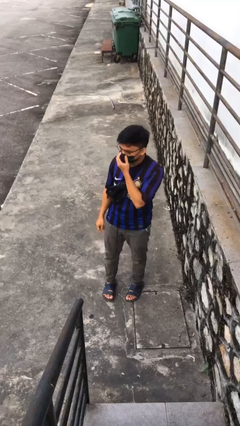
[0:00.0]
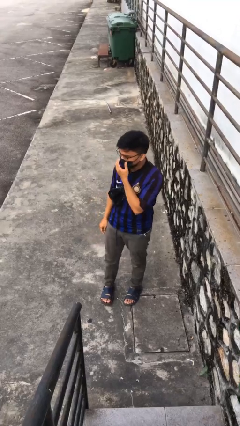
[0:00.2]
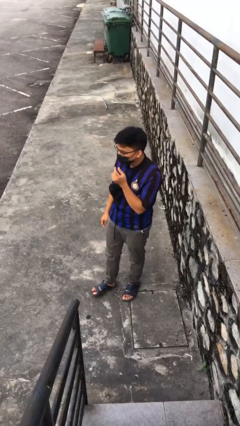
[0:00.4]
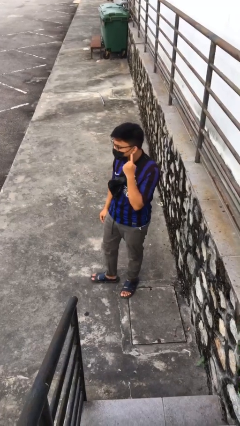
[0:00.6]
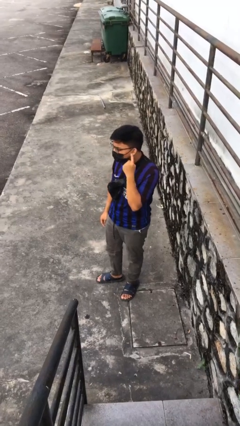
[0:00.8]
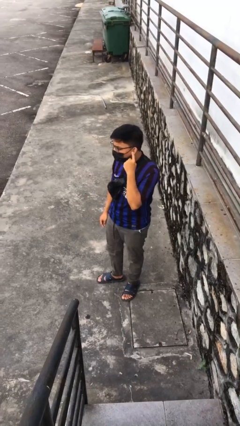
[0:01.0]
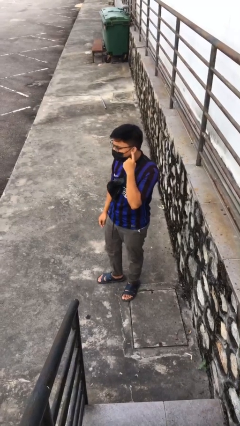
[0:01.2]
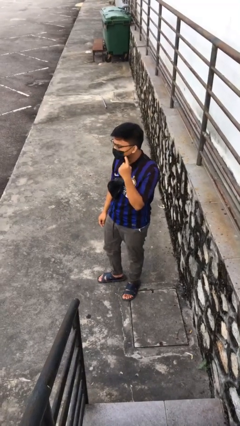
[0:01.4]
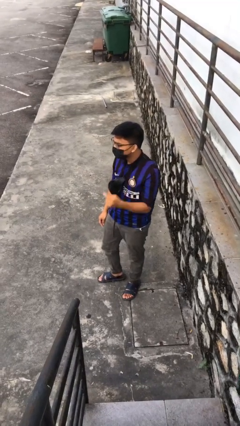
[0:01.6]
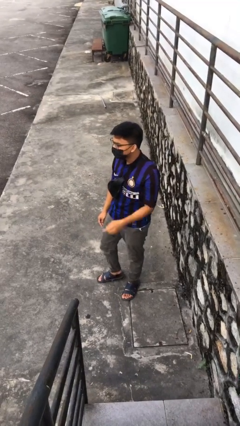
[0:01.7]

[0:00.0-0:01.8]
person gestures listen closely

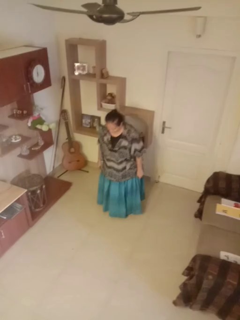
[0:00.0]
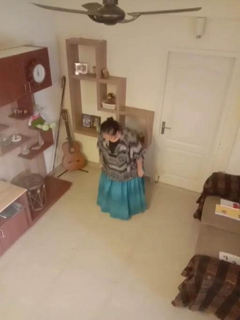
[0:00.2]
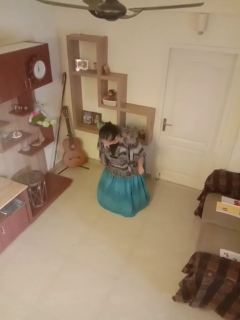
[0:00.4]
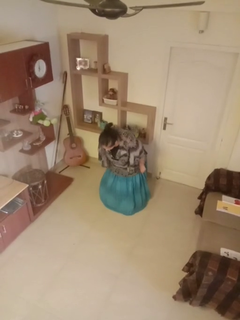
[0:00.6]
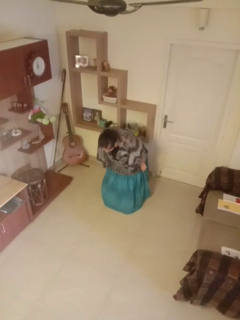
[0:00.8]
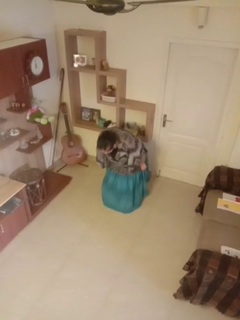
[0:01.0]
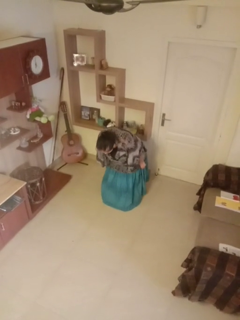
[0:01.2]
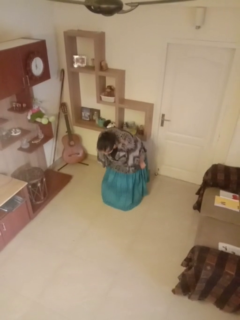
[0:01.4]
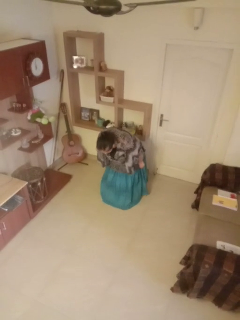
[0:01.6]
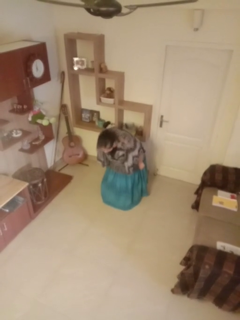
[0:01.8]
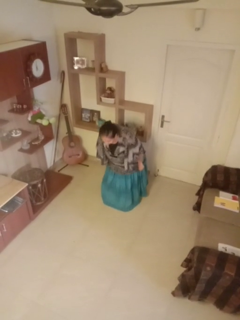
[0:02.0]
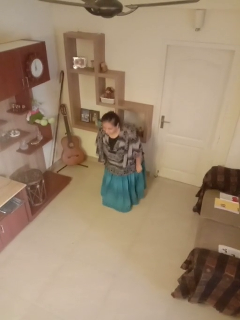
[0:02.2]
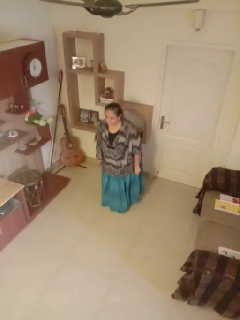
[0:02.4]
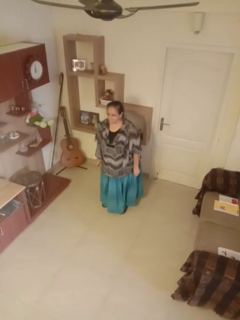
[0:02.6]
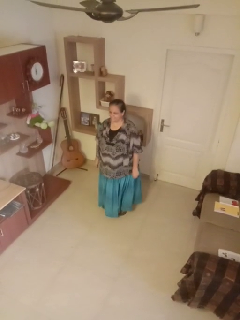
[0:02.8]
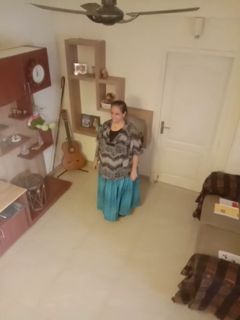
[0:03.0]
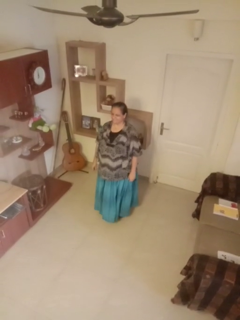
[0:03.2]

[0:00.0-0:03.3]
person bows

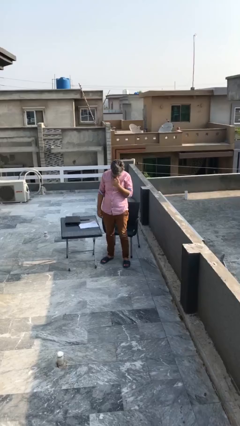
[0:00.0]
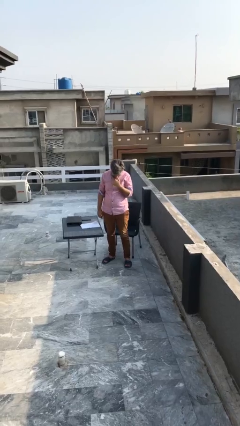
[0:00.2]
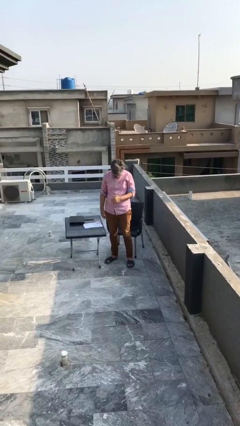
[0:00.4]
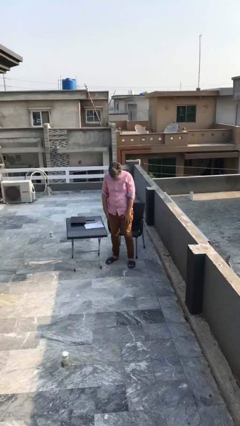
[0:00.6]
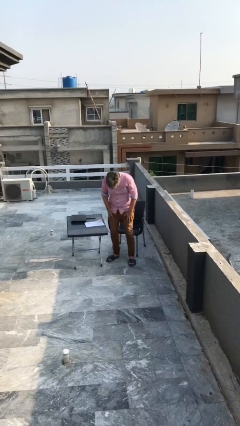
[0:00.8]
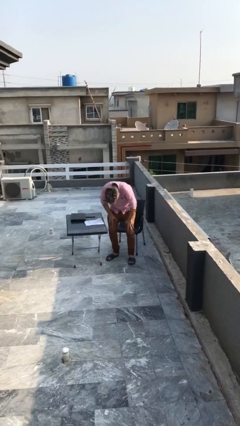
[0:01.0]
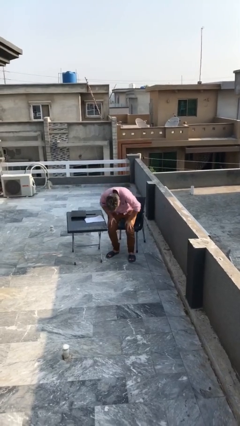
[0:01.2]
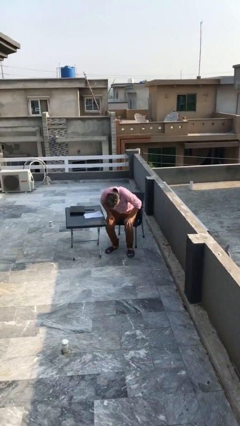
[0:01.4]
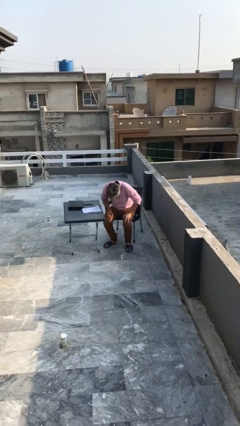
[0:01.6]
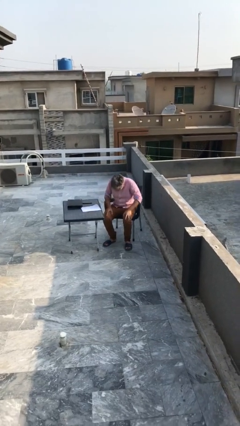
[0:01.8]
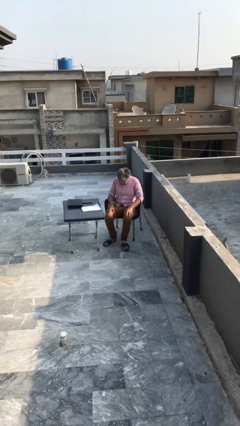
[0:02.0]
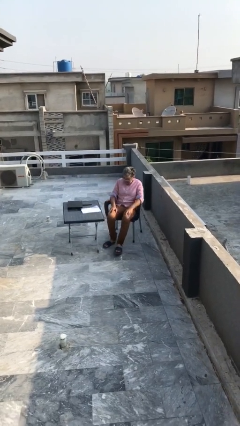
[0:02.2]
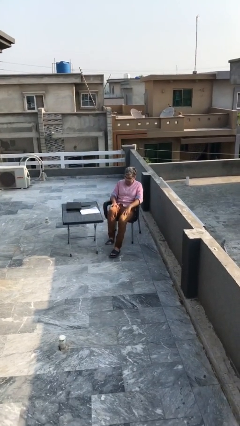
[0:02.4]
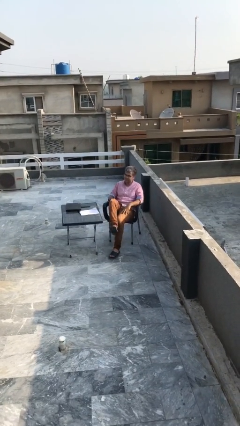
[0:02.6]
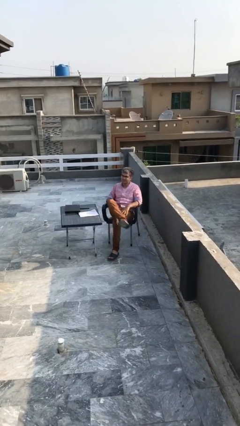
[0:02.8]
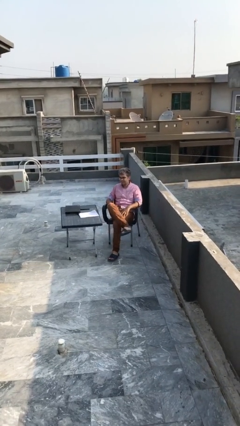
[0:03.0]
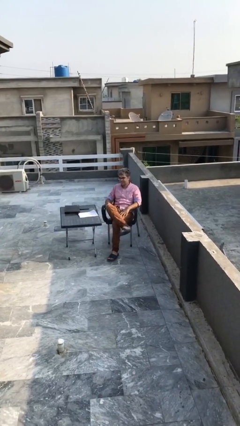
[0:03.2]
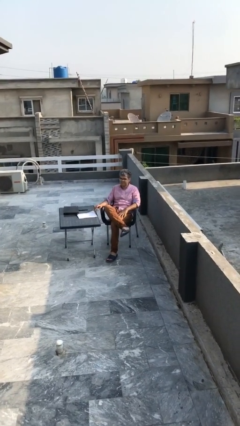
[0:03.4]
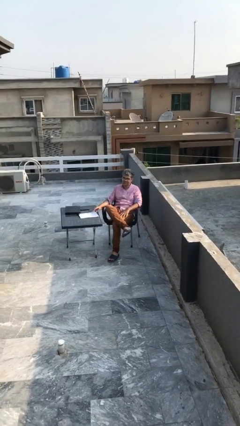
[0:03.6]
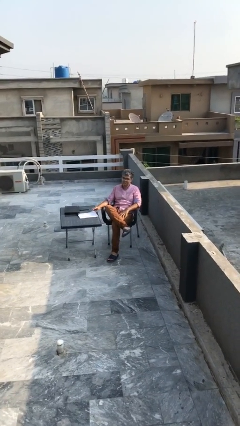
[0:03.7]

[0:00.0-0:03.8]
person sits down

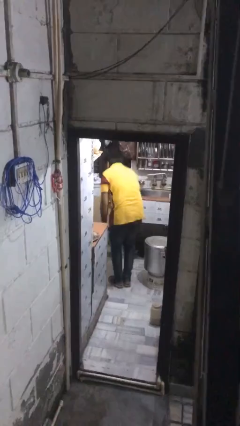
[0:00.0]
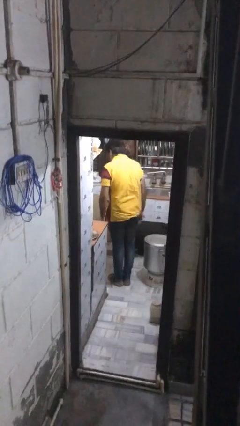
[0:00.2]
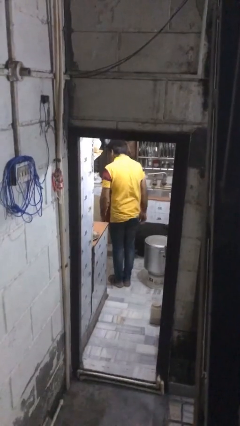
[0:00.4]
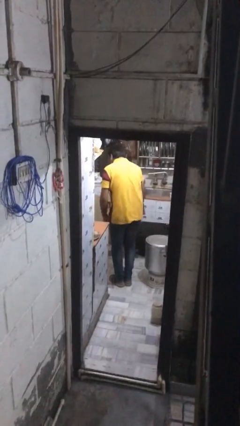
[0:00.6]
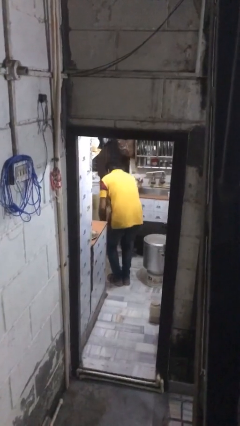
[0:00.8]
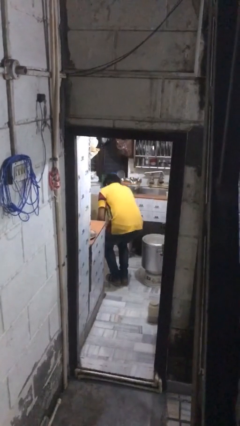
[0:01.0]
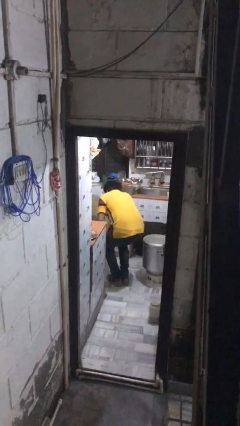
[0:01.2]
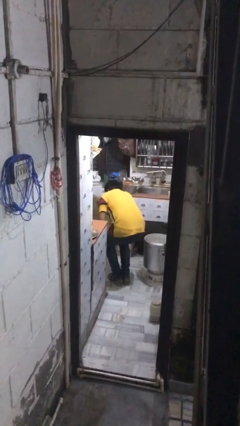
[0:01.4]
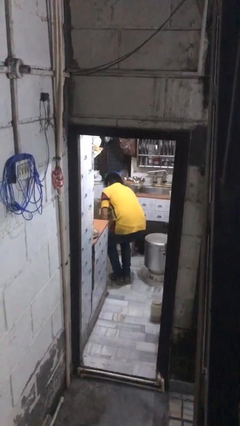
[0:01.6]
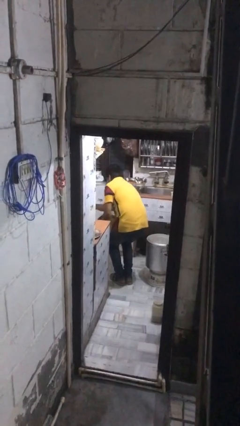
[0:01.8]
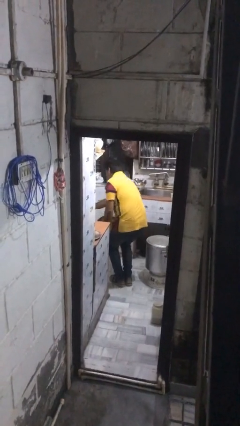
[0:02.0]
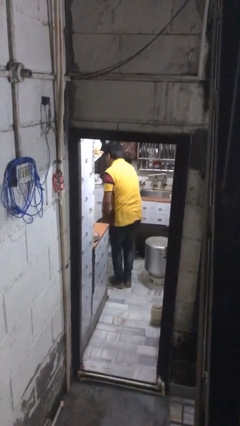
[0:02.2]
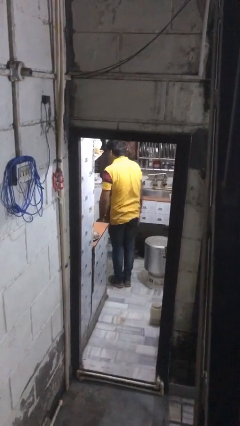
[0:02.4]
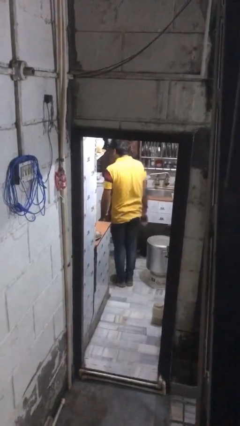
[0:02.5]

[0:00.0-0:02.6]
person closes kitchen drawer

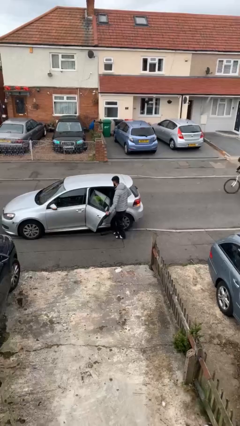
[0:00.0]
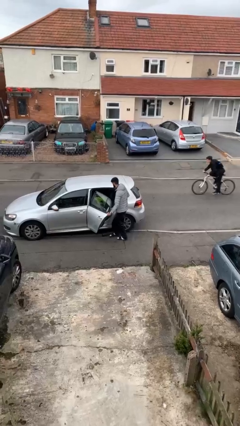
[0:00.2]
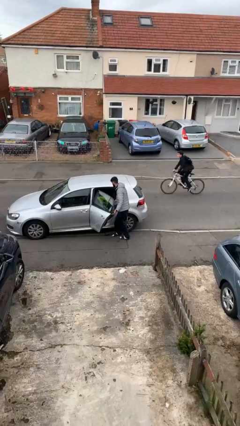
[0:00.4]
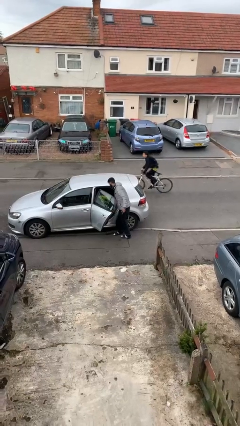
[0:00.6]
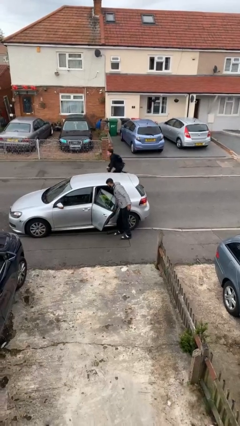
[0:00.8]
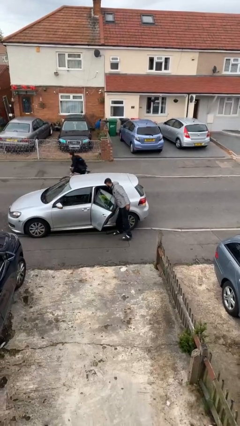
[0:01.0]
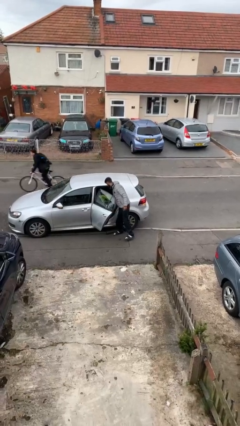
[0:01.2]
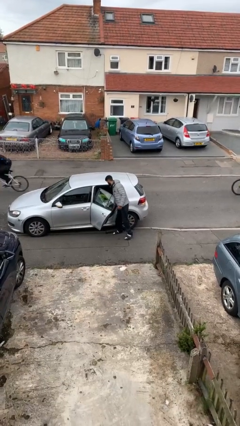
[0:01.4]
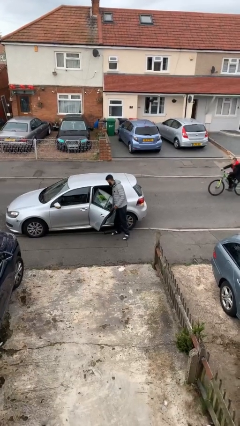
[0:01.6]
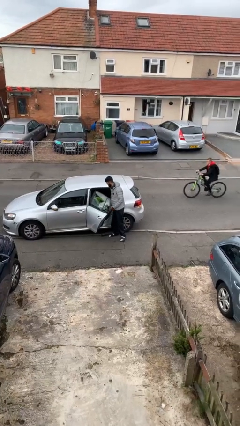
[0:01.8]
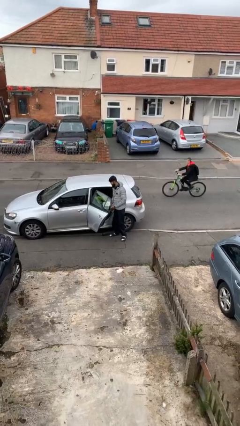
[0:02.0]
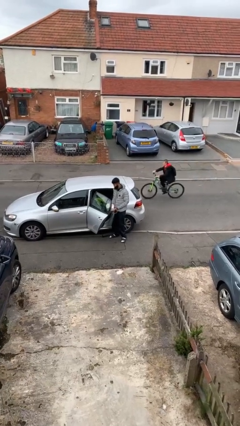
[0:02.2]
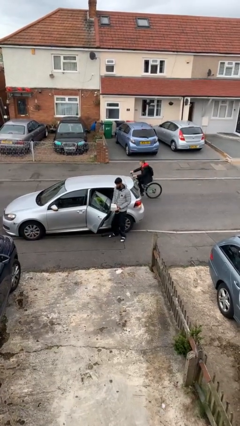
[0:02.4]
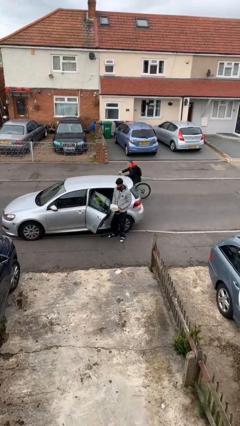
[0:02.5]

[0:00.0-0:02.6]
person unloads car

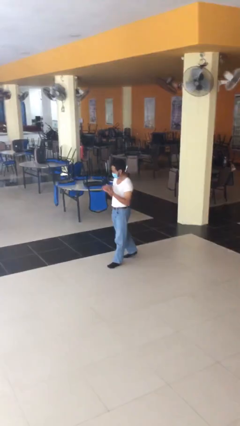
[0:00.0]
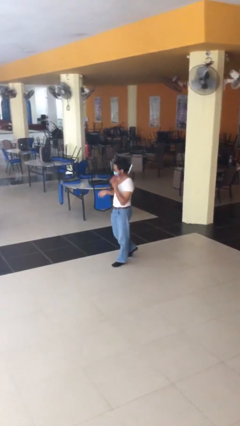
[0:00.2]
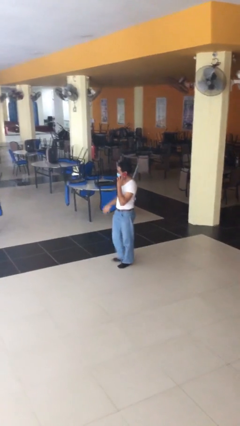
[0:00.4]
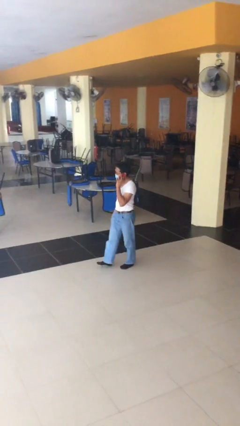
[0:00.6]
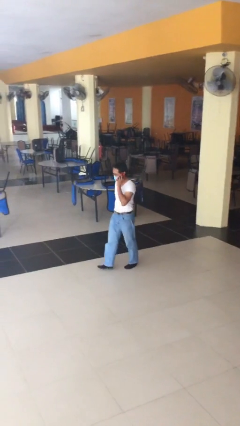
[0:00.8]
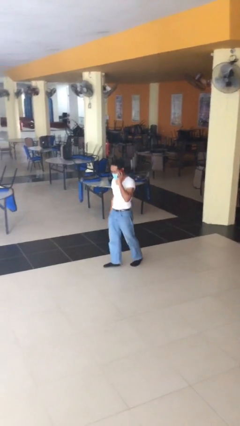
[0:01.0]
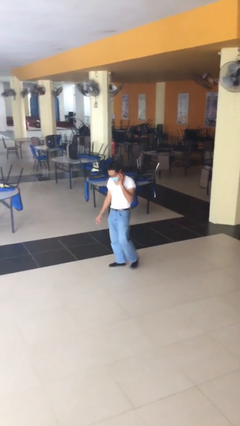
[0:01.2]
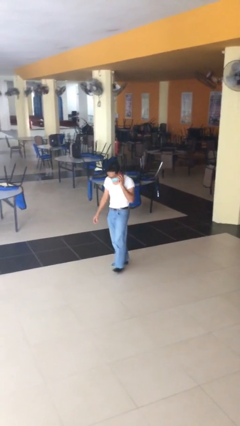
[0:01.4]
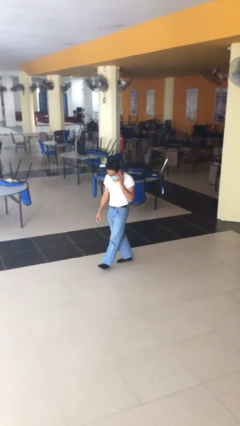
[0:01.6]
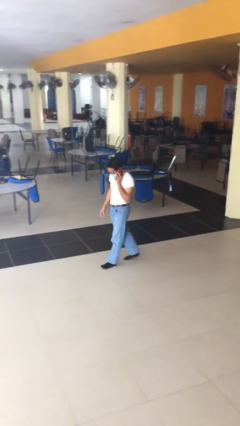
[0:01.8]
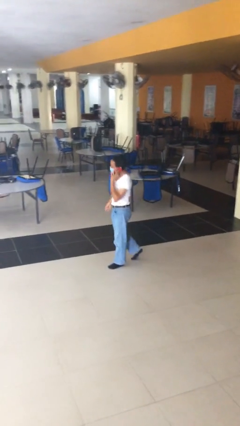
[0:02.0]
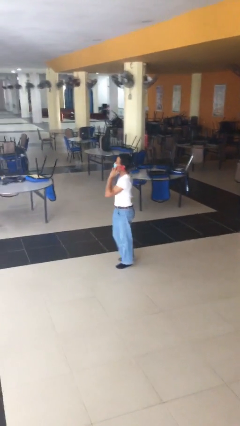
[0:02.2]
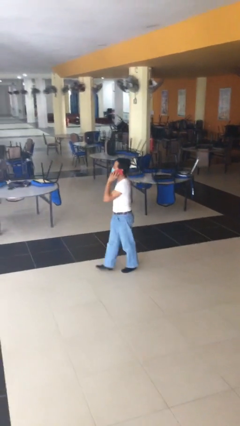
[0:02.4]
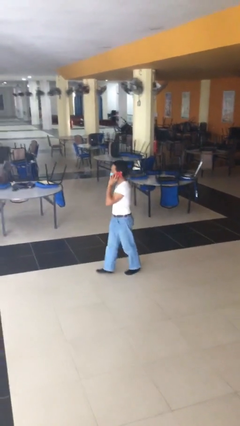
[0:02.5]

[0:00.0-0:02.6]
person talks on phone

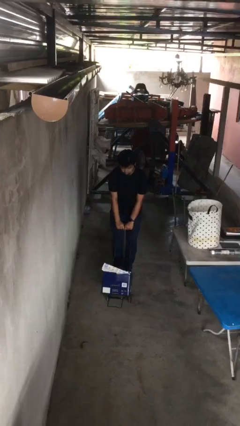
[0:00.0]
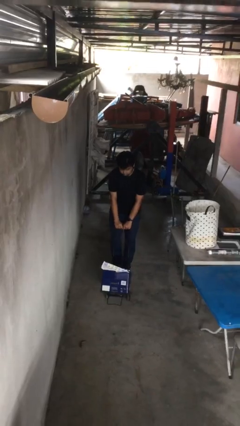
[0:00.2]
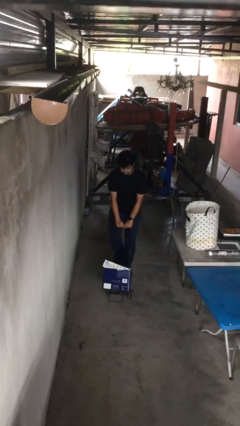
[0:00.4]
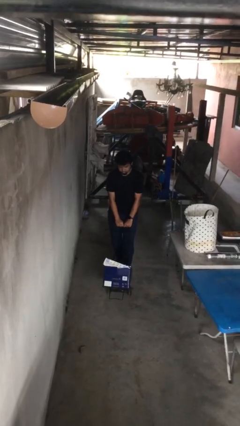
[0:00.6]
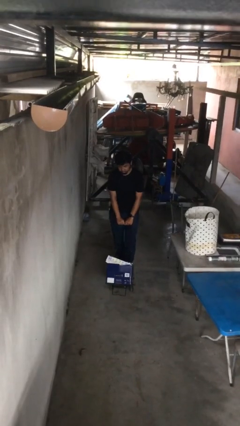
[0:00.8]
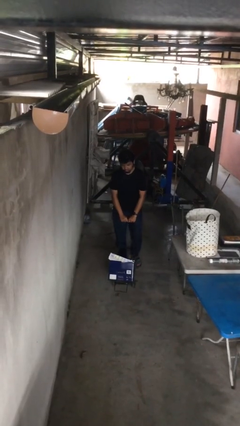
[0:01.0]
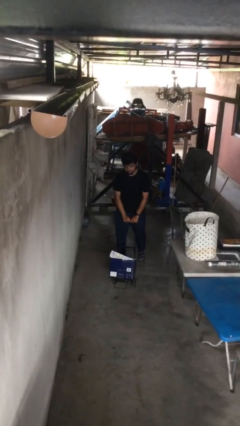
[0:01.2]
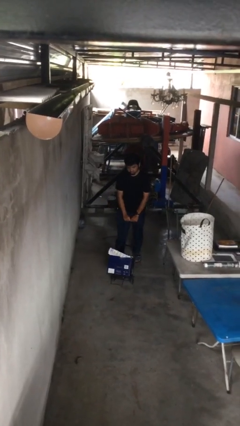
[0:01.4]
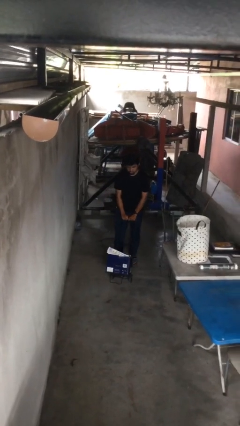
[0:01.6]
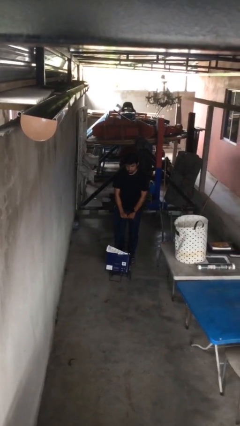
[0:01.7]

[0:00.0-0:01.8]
person pulls wheeled cart
